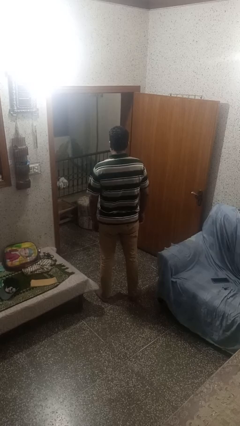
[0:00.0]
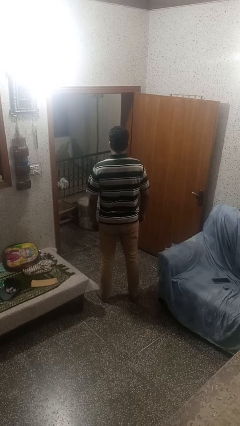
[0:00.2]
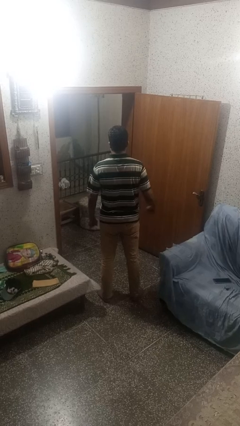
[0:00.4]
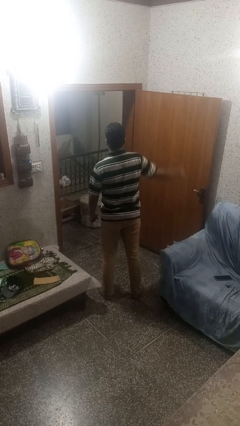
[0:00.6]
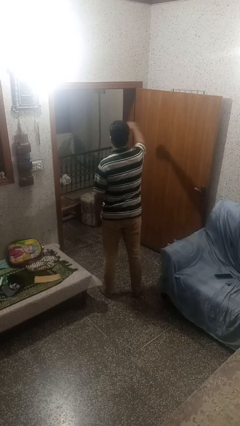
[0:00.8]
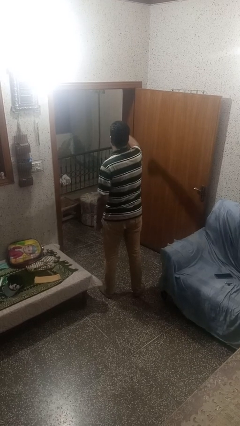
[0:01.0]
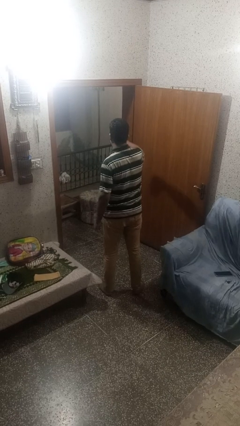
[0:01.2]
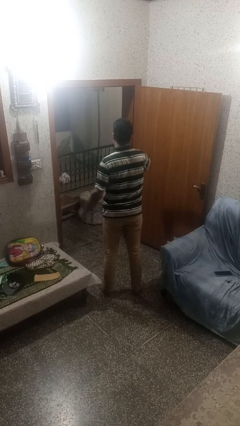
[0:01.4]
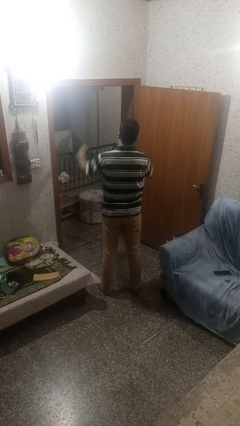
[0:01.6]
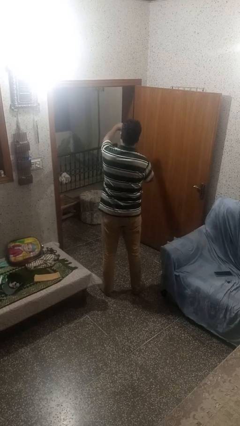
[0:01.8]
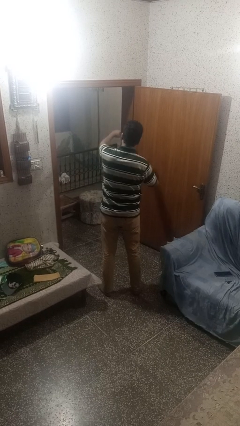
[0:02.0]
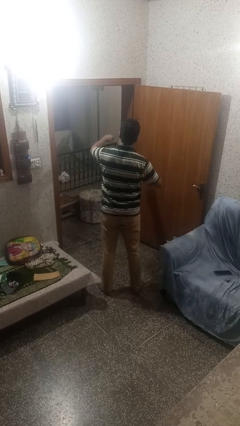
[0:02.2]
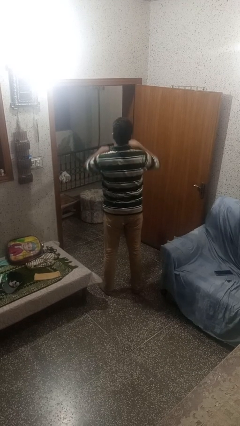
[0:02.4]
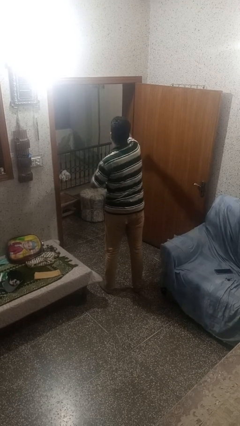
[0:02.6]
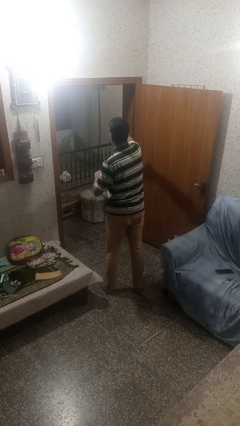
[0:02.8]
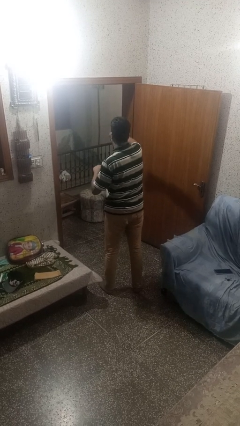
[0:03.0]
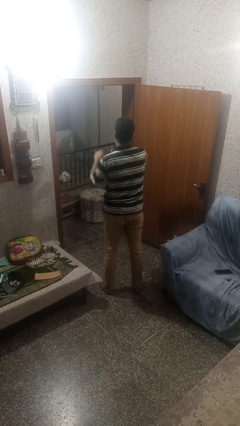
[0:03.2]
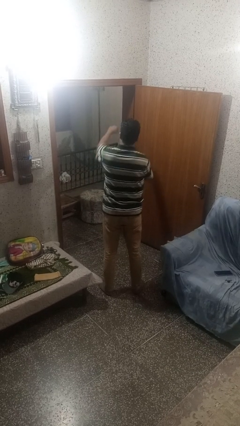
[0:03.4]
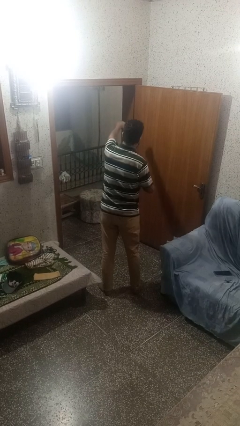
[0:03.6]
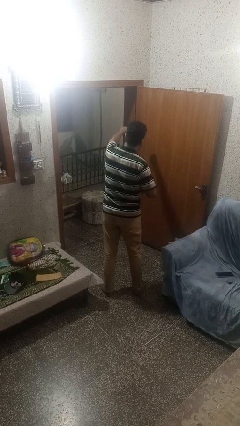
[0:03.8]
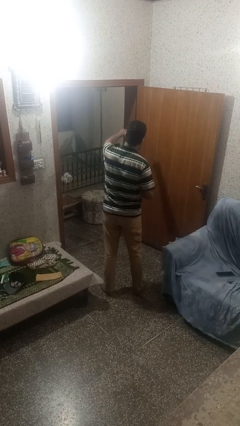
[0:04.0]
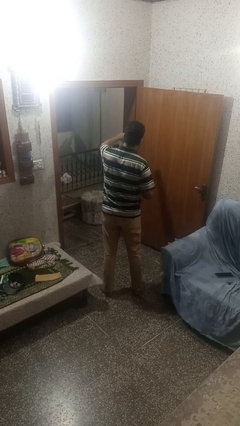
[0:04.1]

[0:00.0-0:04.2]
person punches

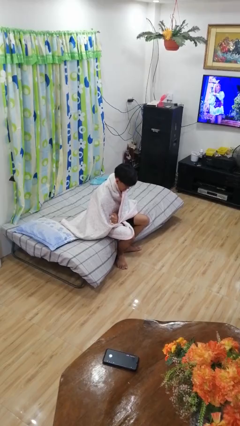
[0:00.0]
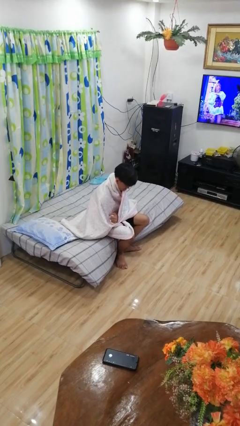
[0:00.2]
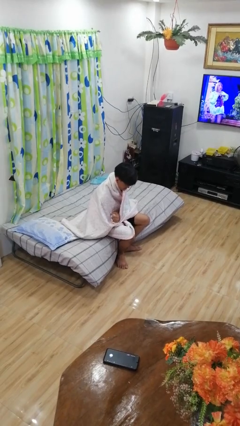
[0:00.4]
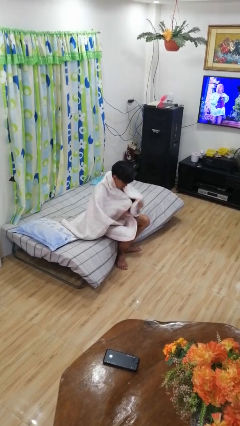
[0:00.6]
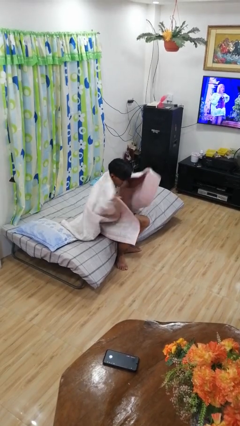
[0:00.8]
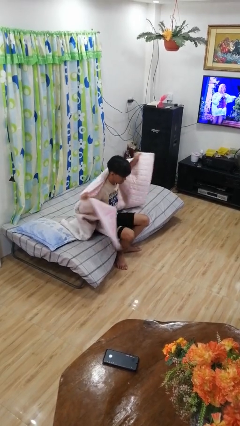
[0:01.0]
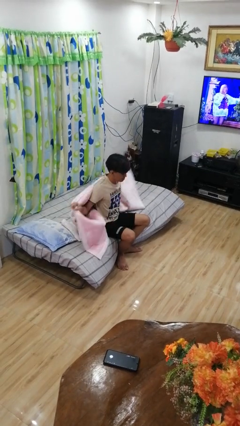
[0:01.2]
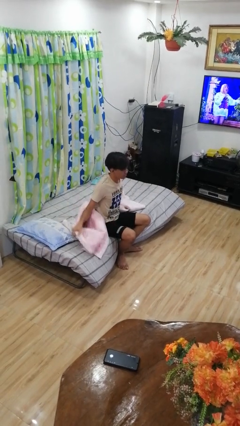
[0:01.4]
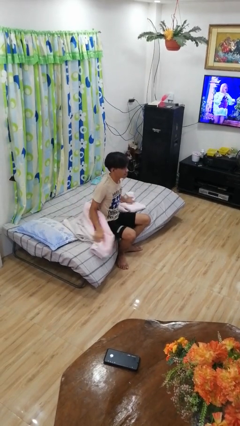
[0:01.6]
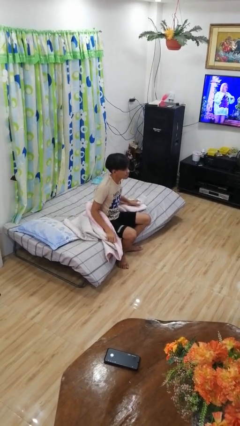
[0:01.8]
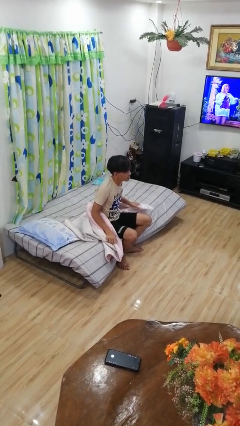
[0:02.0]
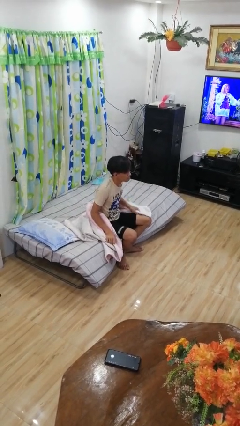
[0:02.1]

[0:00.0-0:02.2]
person uncovers with bedsheets

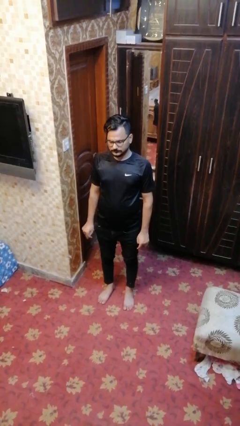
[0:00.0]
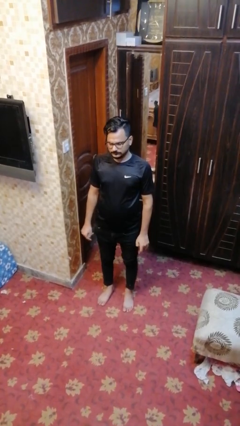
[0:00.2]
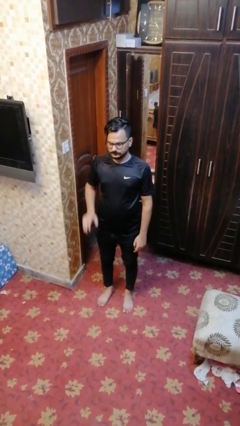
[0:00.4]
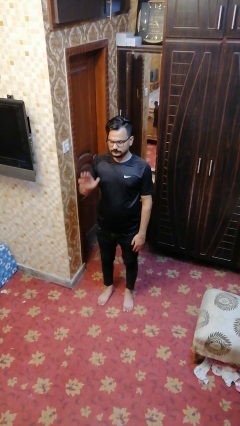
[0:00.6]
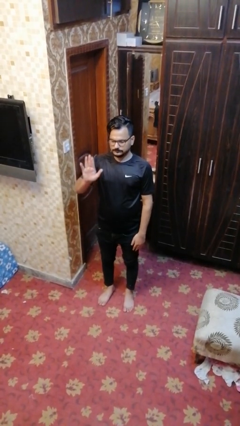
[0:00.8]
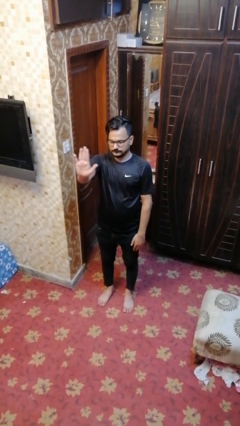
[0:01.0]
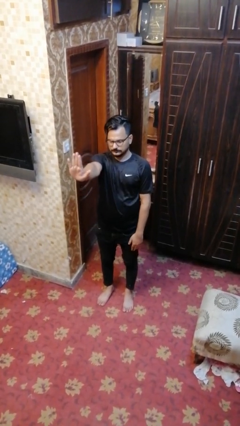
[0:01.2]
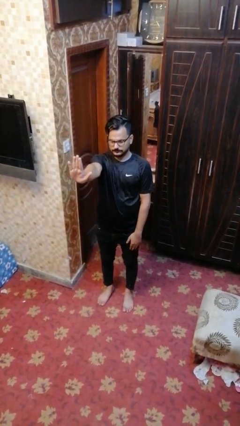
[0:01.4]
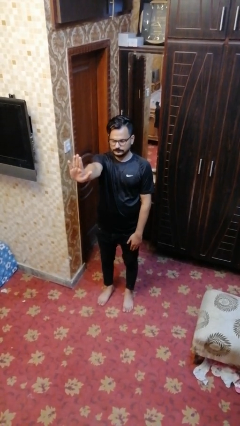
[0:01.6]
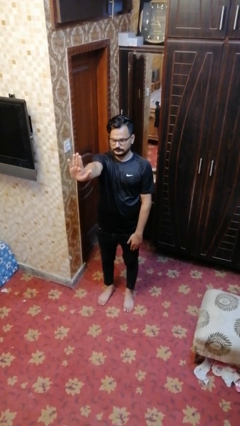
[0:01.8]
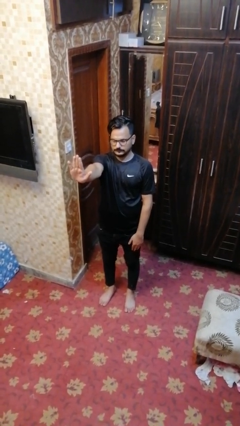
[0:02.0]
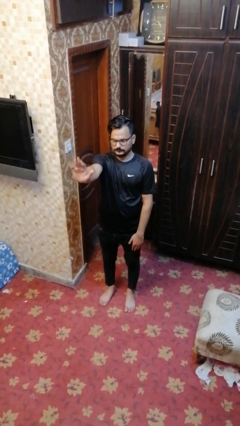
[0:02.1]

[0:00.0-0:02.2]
person gestures stop

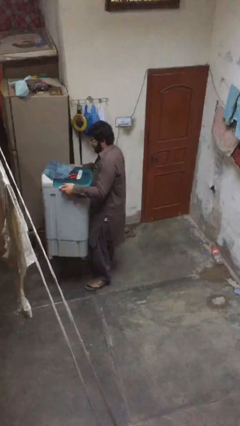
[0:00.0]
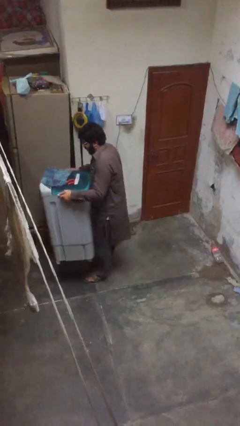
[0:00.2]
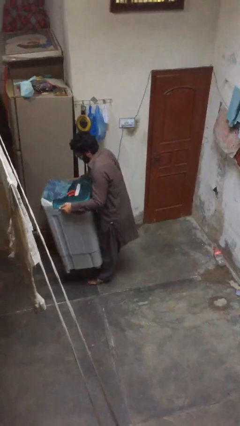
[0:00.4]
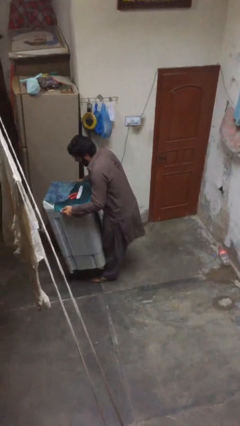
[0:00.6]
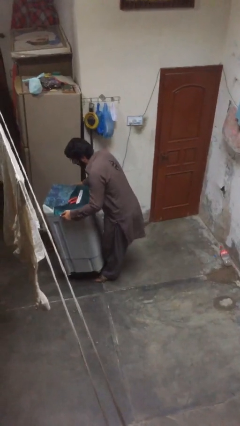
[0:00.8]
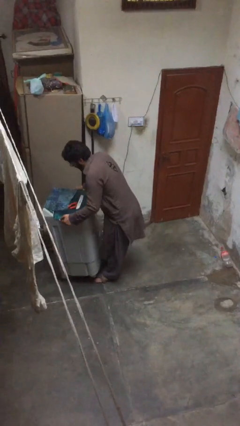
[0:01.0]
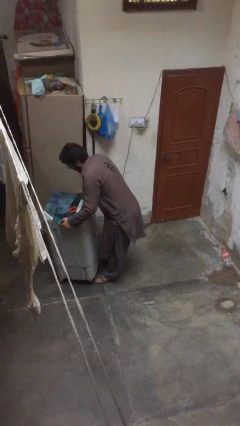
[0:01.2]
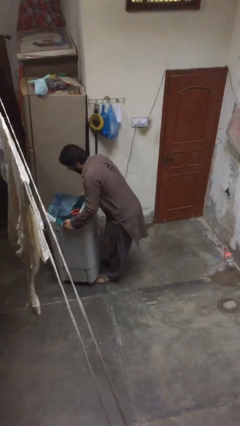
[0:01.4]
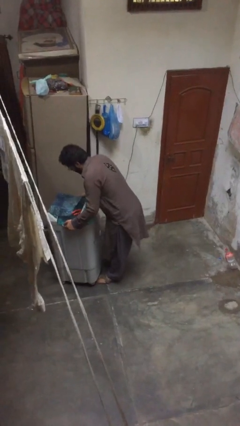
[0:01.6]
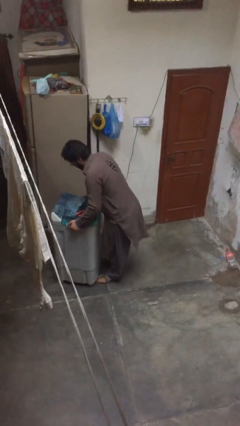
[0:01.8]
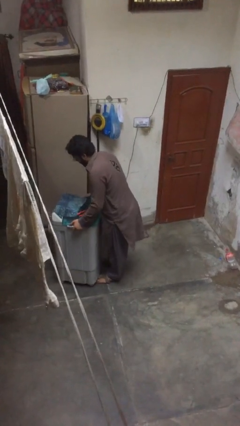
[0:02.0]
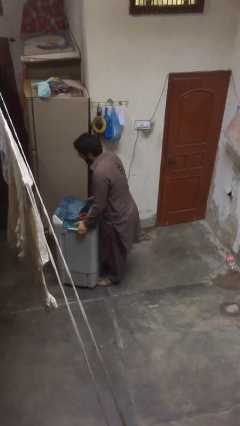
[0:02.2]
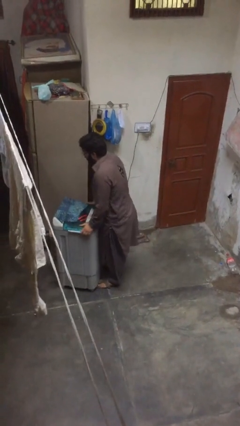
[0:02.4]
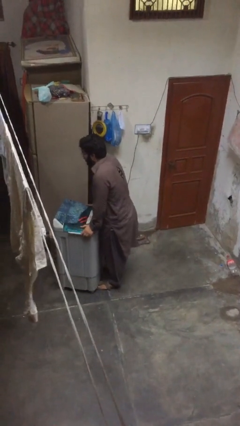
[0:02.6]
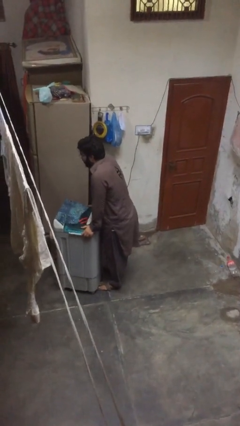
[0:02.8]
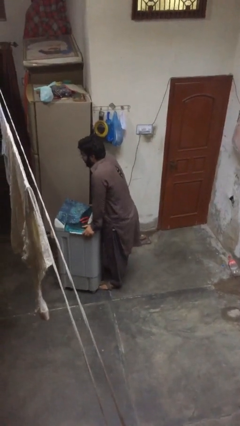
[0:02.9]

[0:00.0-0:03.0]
person puts down object on floor

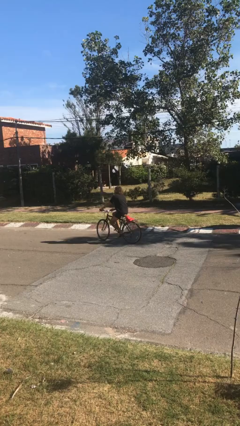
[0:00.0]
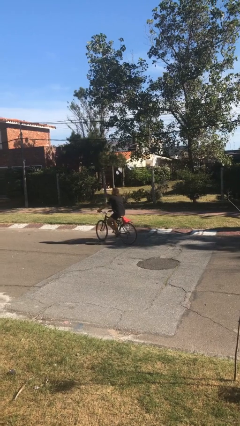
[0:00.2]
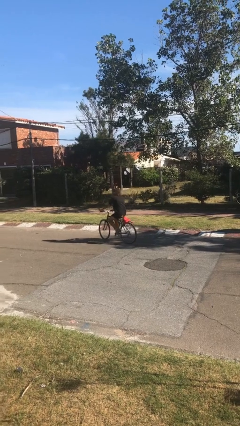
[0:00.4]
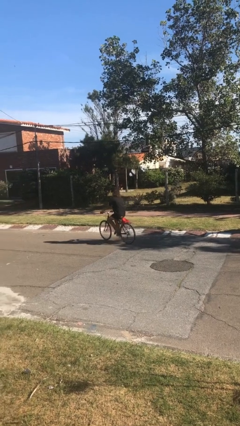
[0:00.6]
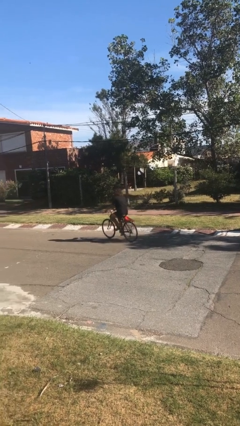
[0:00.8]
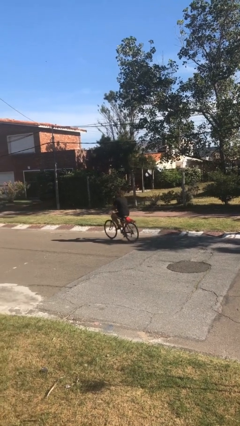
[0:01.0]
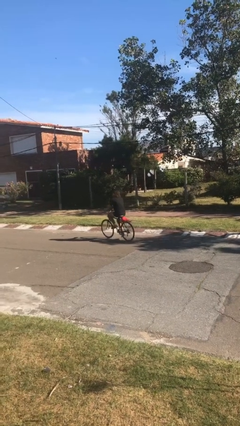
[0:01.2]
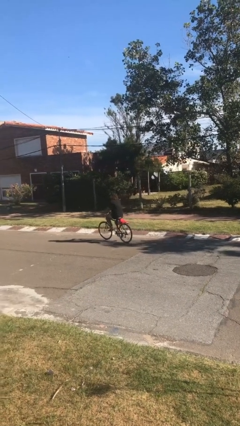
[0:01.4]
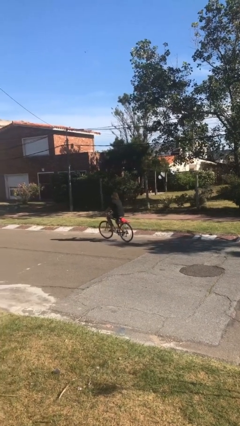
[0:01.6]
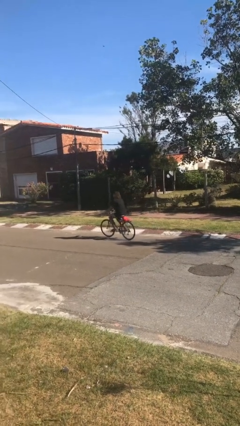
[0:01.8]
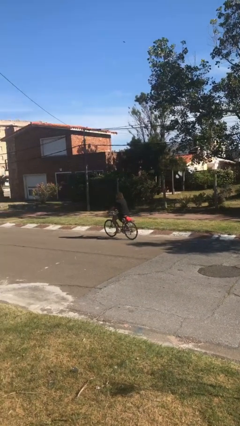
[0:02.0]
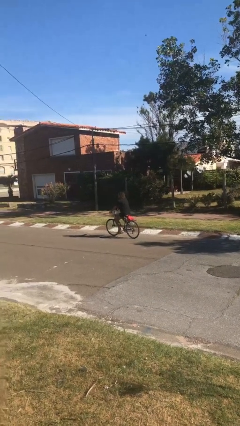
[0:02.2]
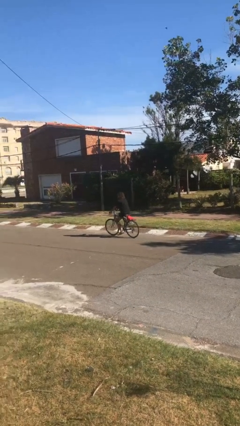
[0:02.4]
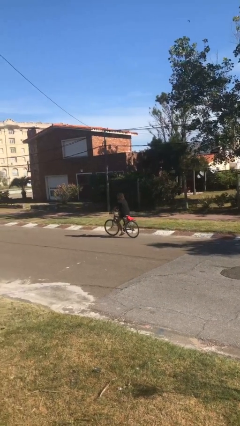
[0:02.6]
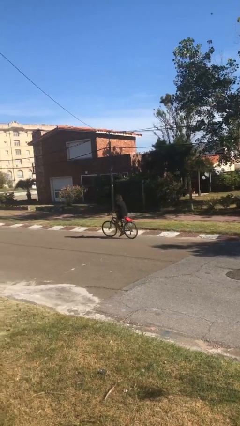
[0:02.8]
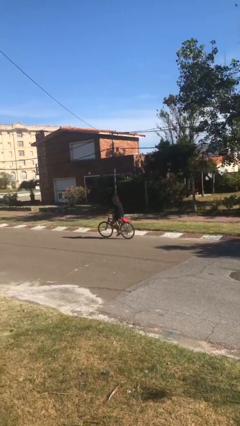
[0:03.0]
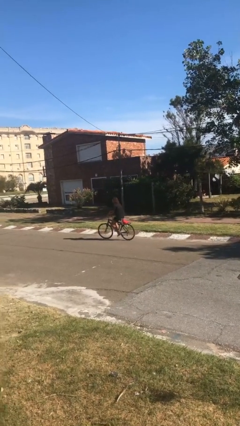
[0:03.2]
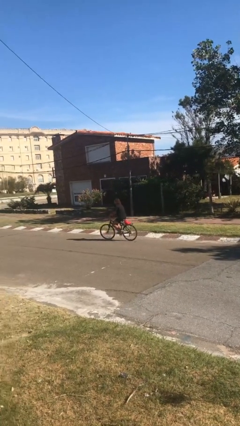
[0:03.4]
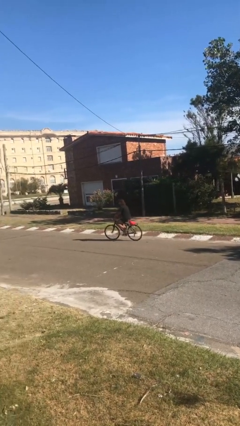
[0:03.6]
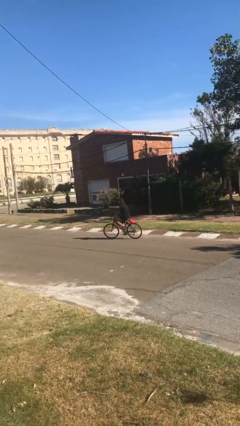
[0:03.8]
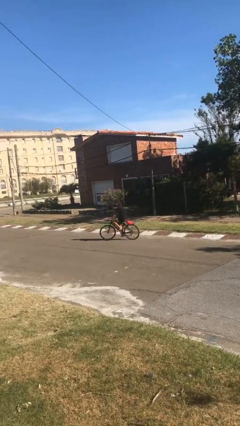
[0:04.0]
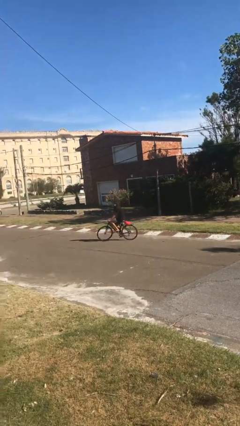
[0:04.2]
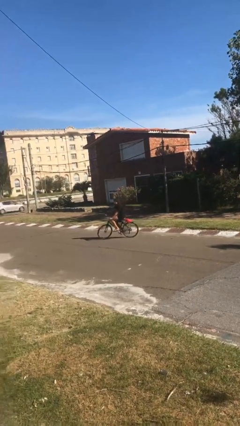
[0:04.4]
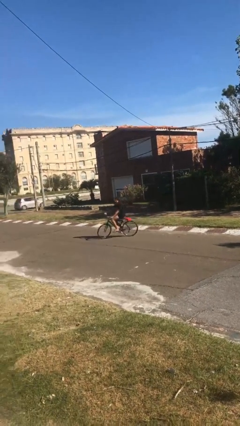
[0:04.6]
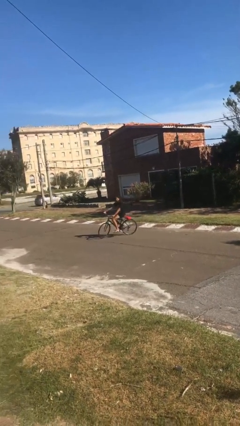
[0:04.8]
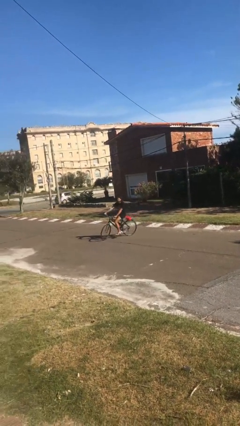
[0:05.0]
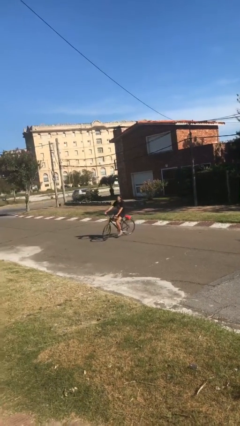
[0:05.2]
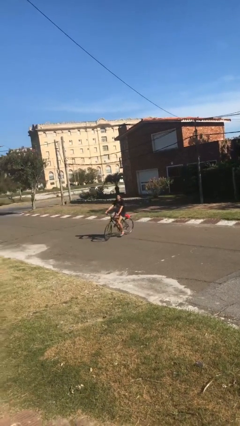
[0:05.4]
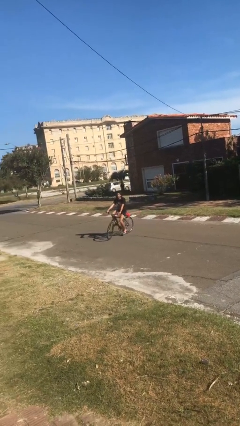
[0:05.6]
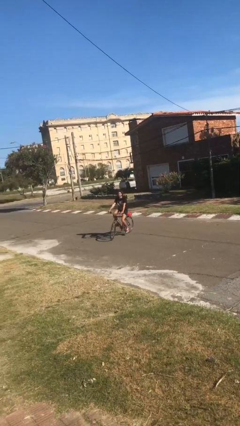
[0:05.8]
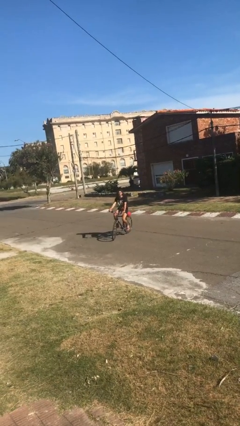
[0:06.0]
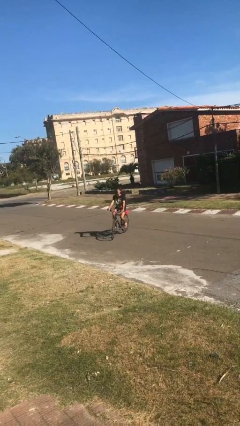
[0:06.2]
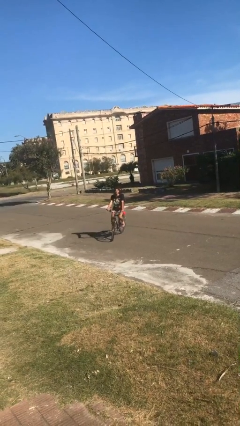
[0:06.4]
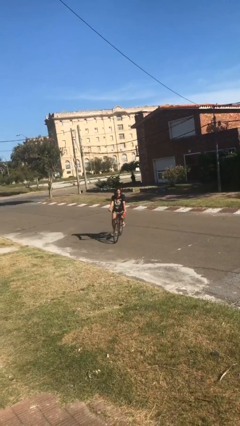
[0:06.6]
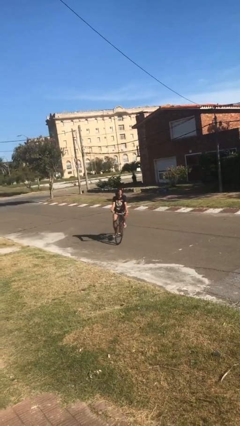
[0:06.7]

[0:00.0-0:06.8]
person rides bicycle
